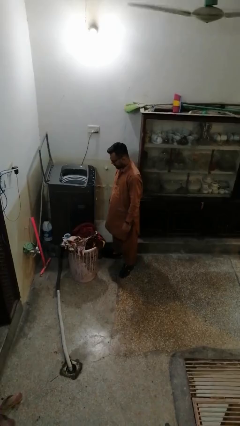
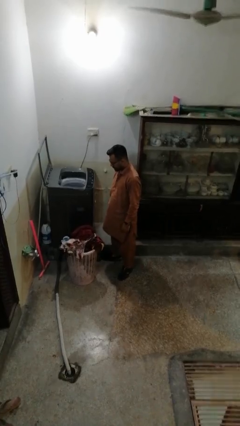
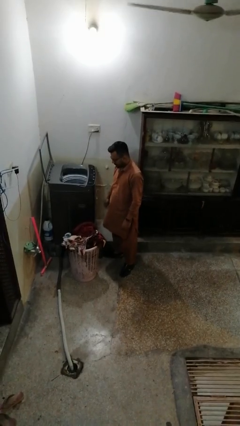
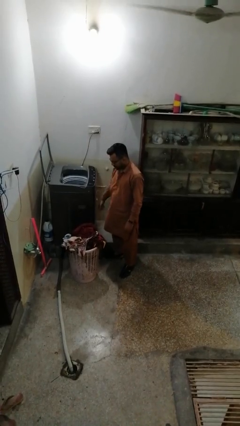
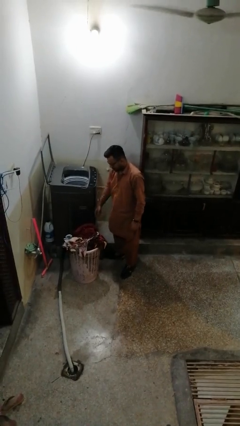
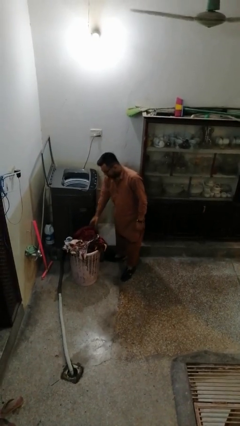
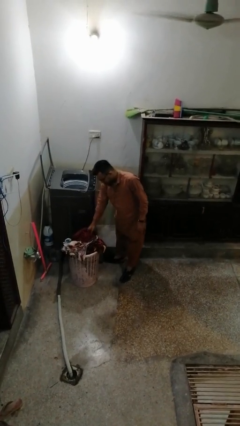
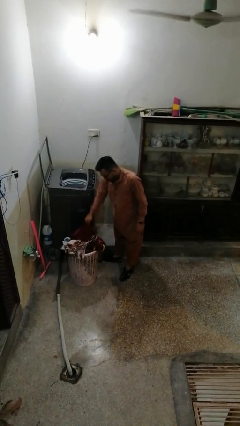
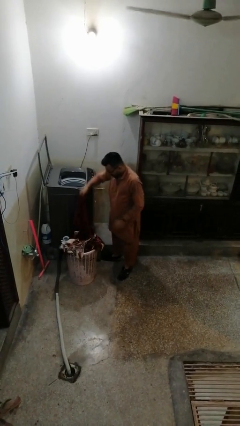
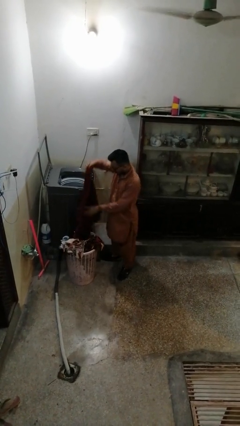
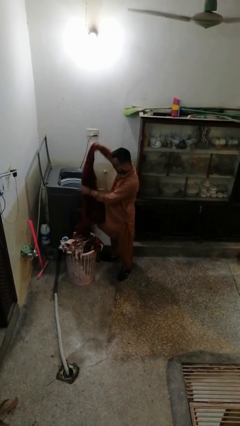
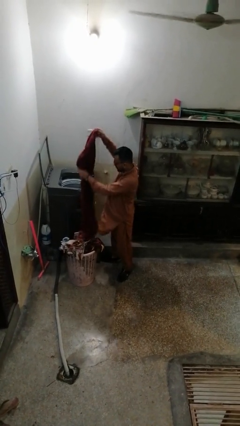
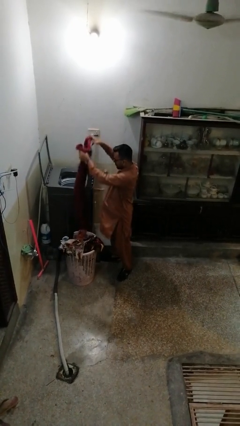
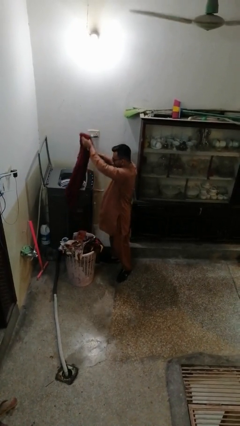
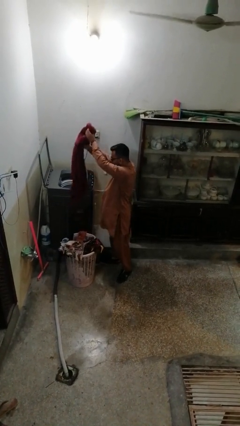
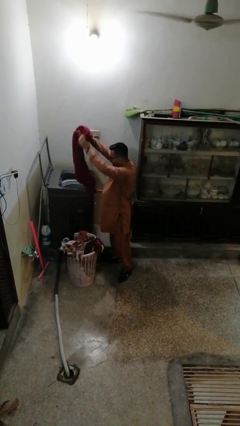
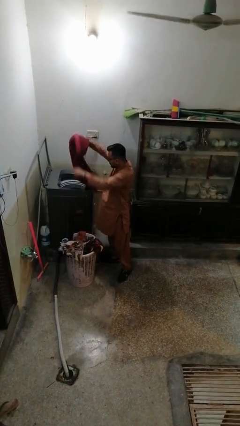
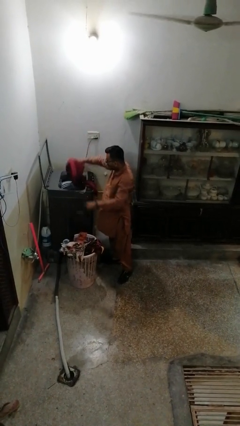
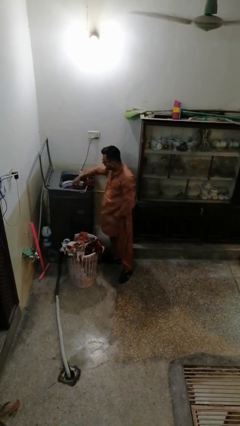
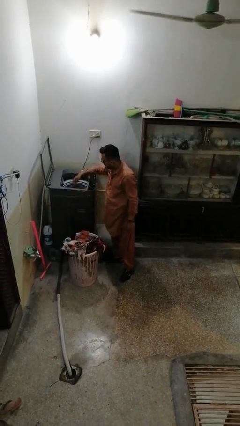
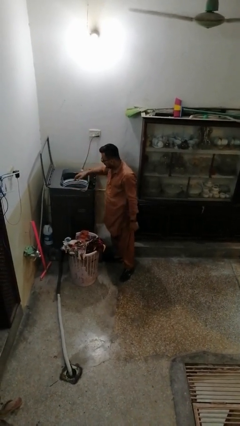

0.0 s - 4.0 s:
person loads dryer

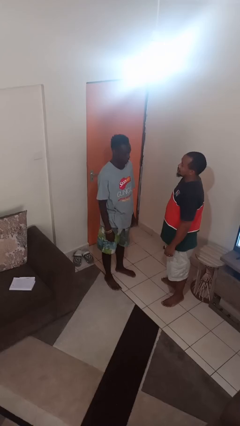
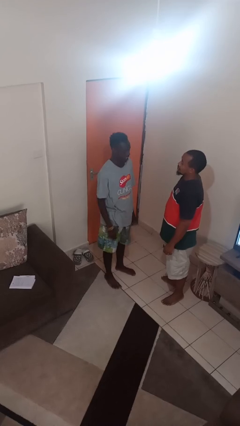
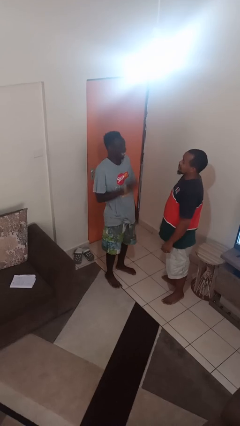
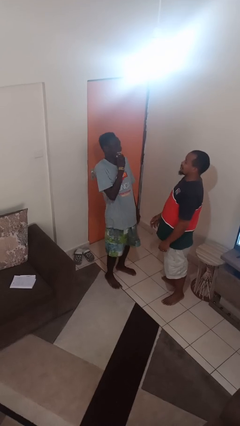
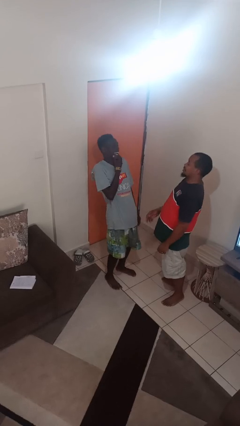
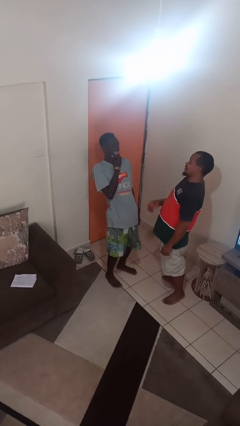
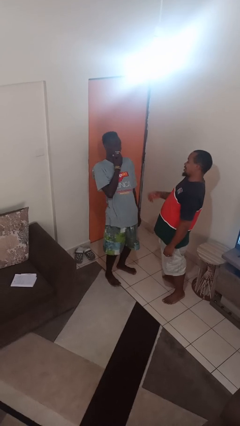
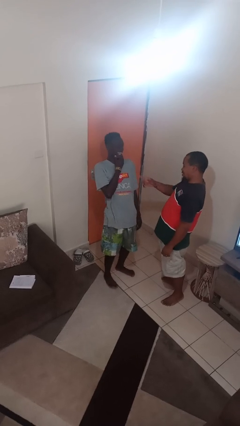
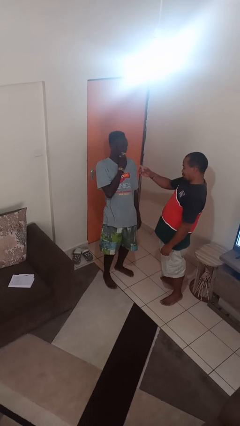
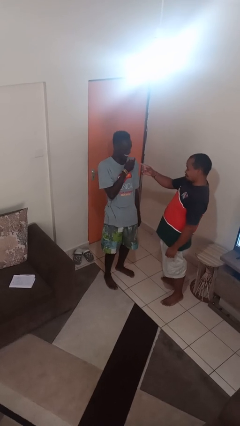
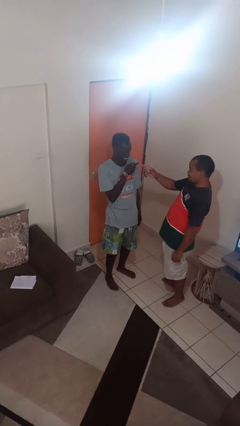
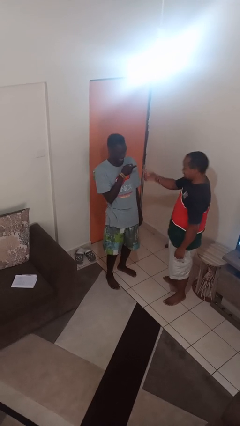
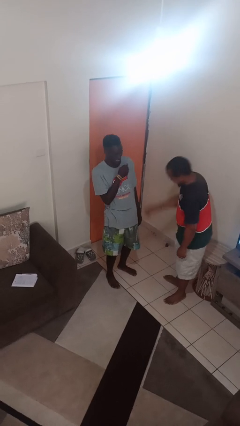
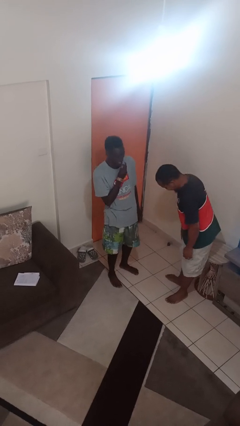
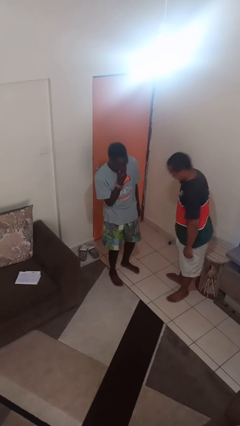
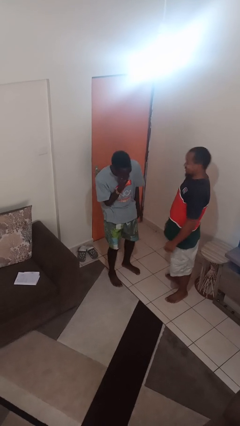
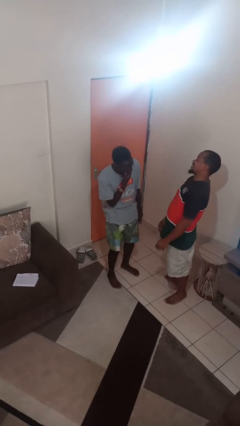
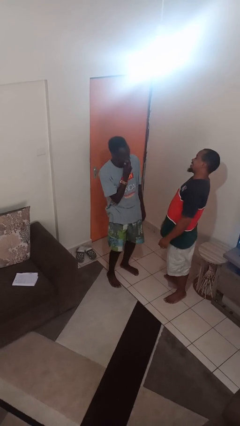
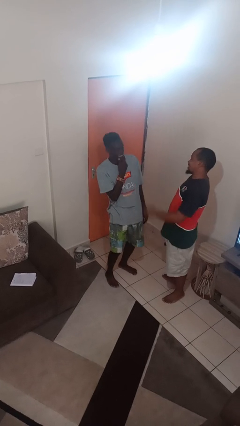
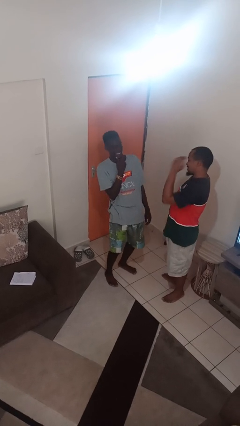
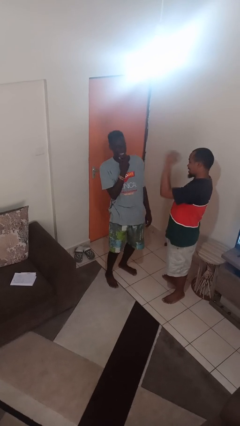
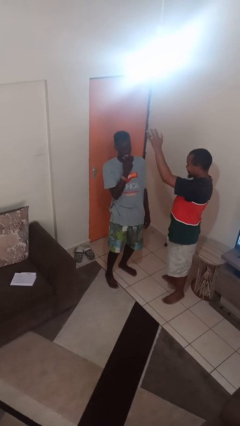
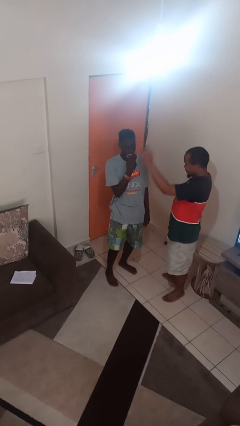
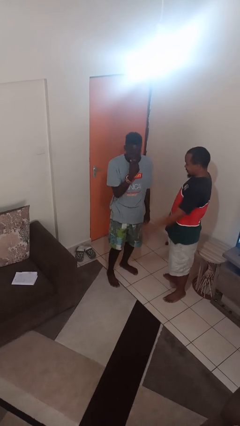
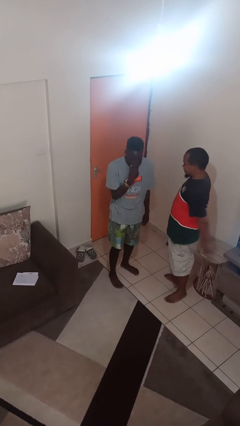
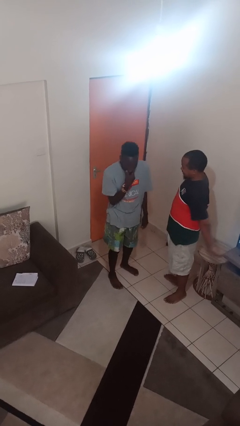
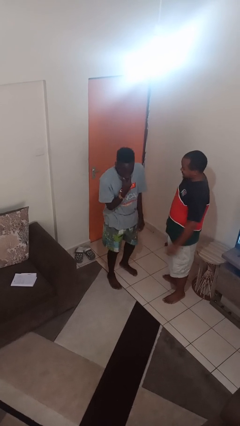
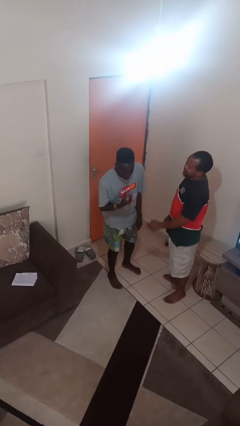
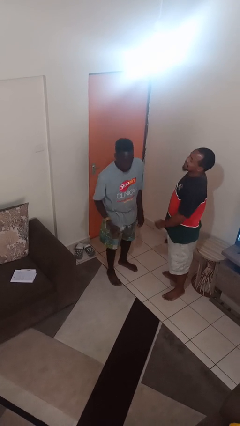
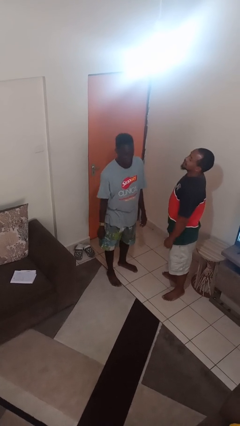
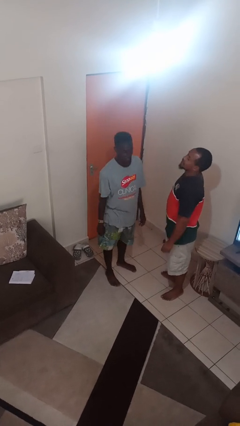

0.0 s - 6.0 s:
person laughs with person

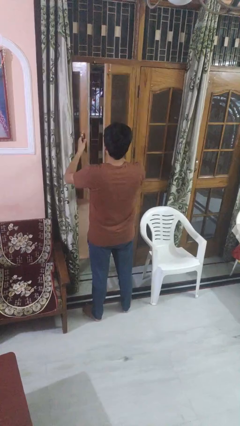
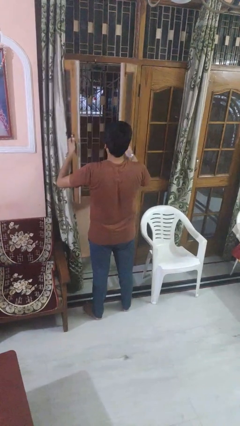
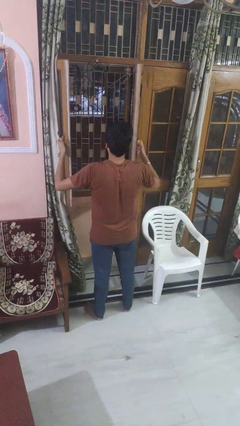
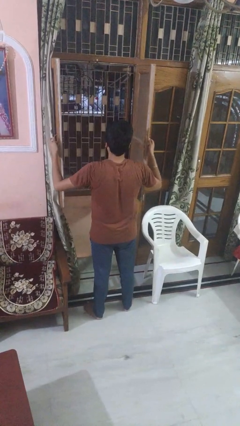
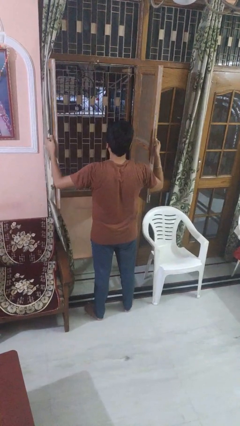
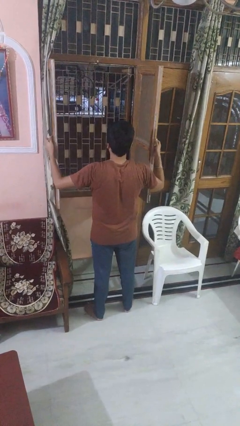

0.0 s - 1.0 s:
person opens home window

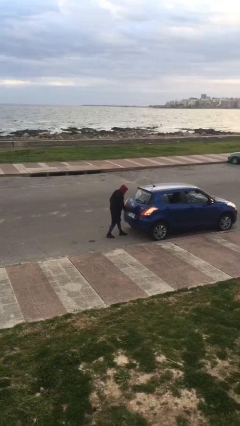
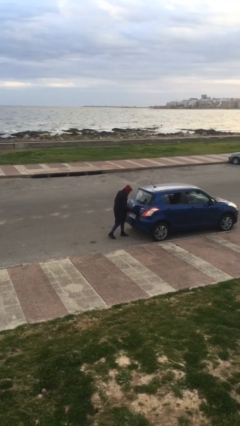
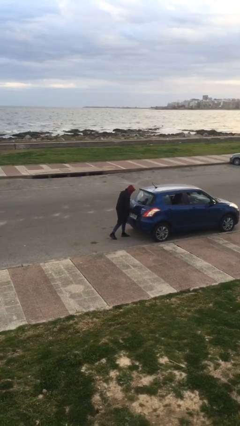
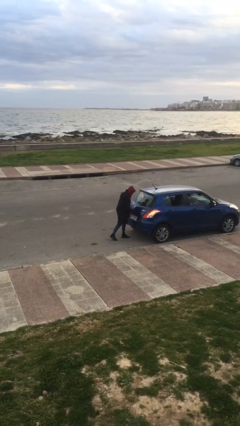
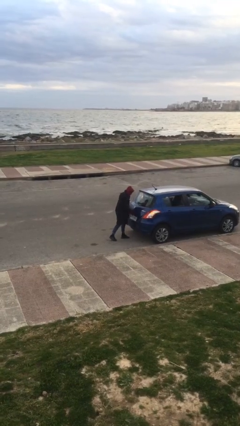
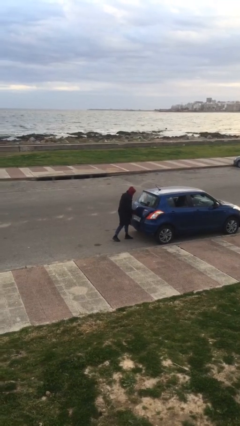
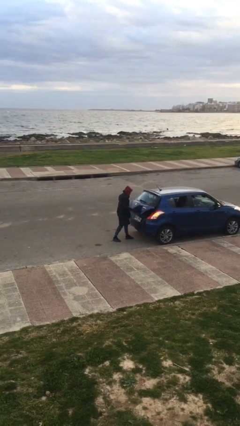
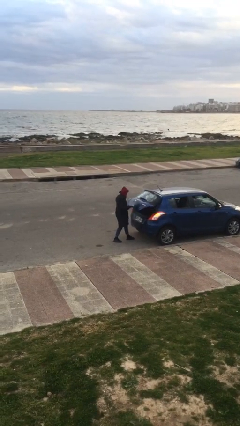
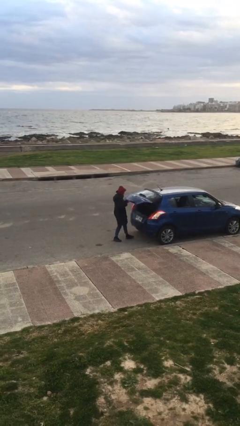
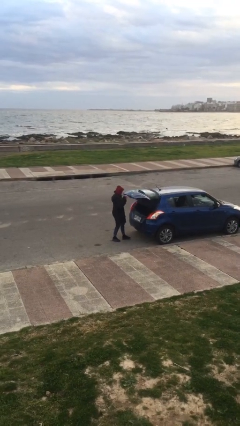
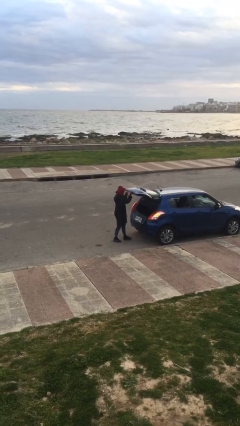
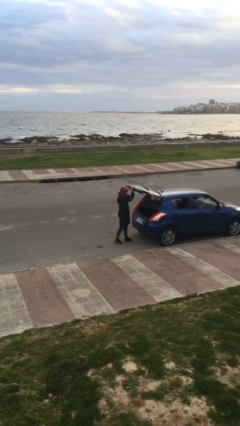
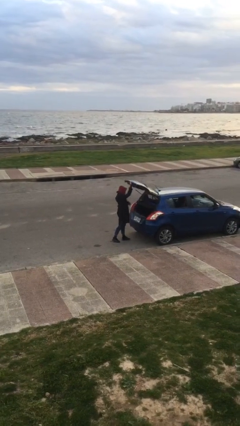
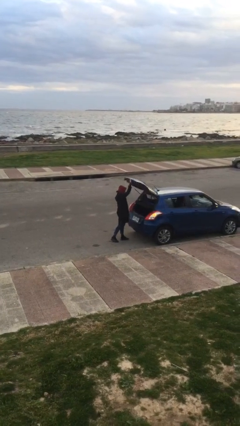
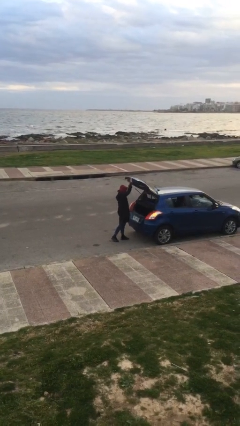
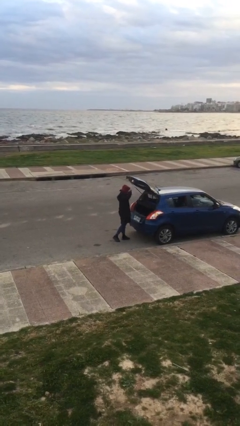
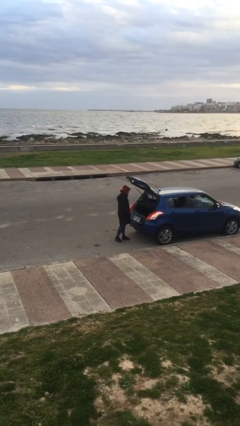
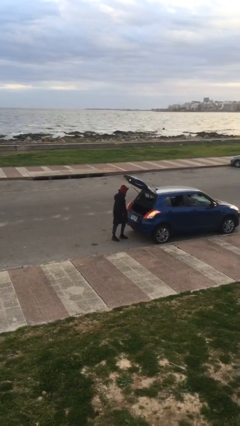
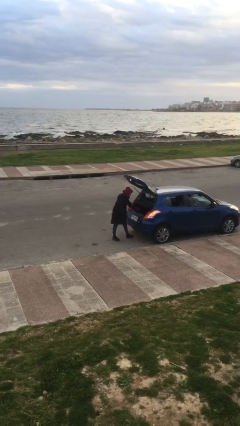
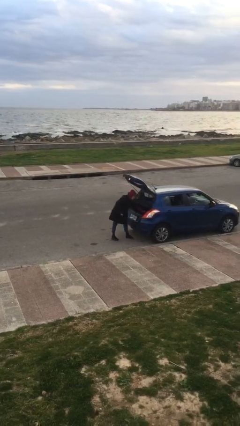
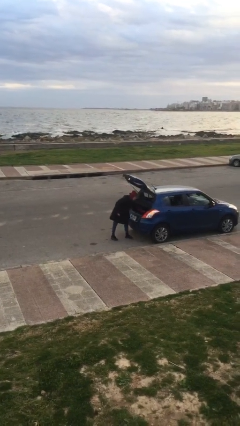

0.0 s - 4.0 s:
person opens car door

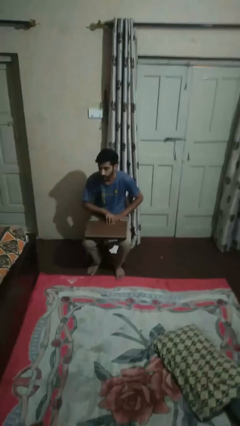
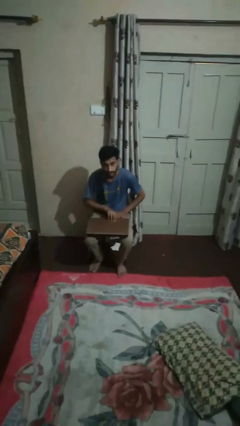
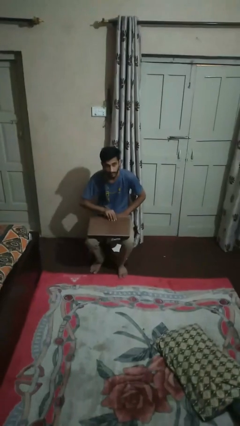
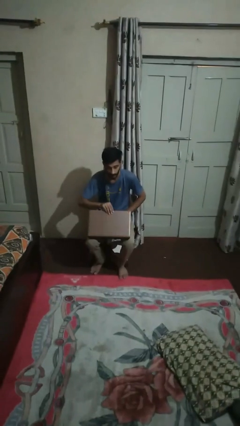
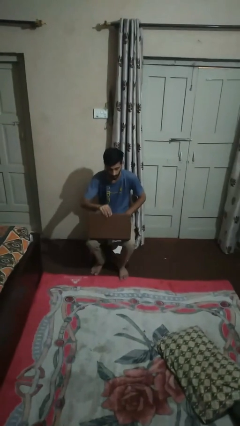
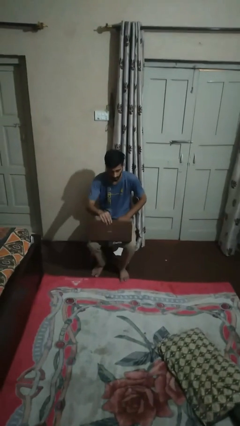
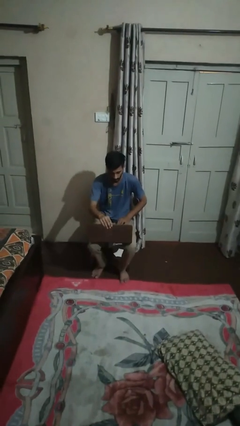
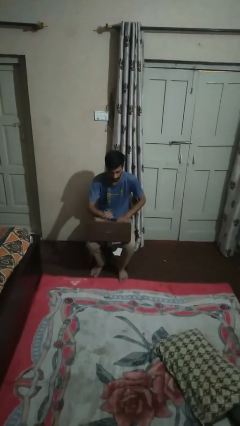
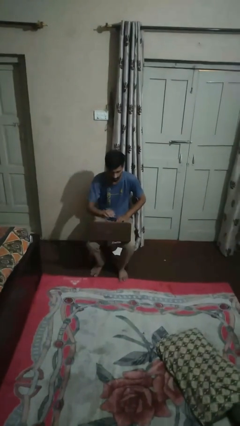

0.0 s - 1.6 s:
person opens laptop

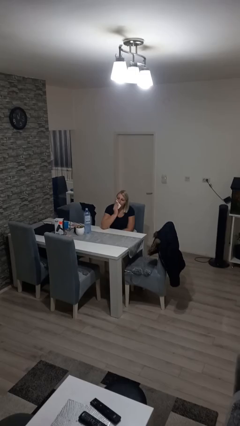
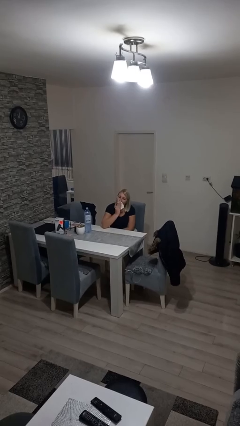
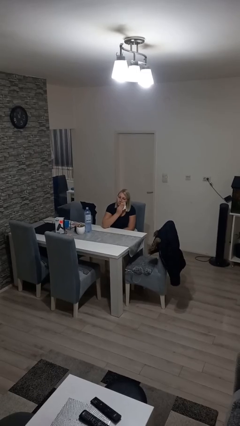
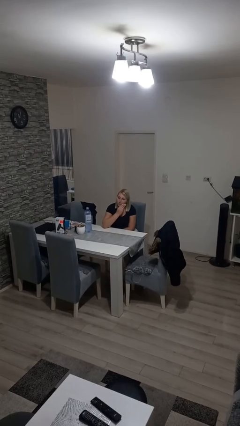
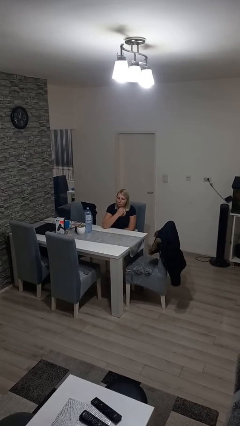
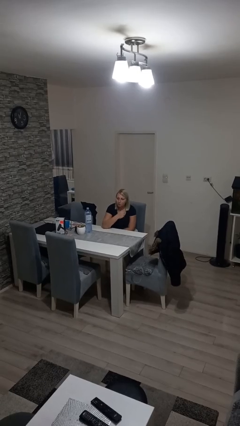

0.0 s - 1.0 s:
person wipes mouth with napkin
